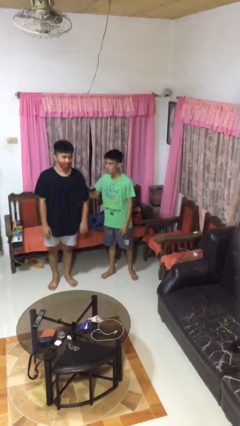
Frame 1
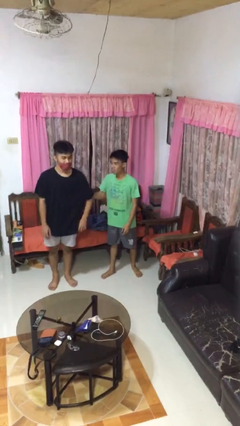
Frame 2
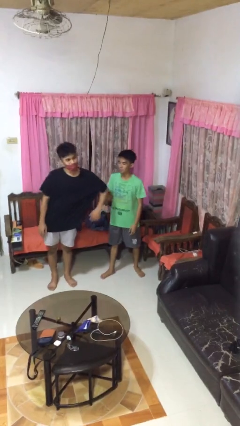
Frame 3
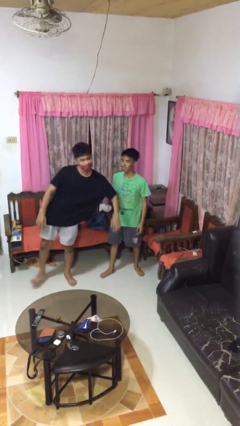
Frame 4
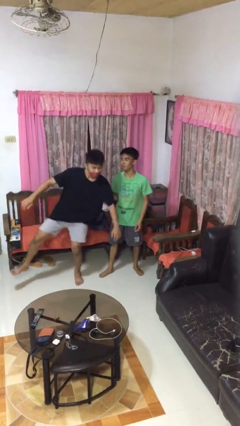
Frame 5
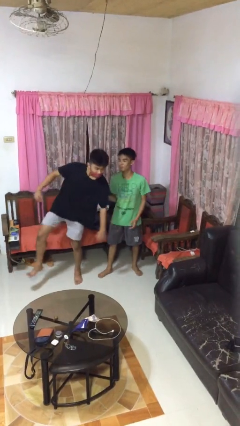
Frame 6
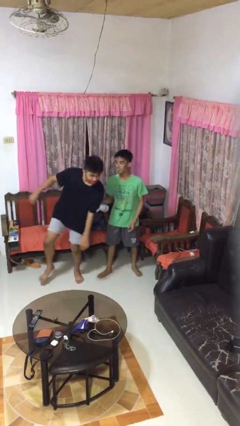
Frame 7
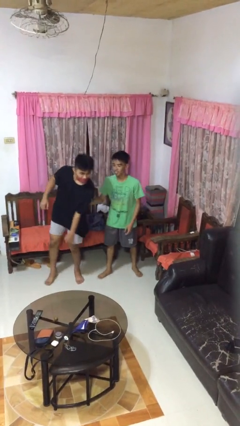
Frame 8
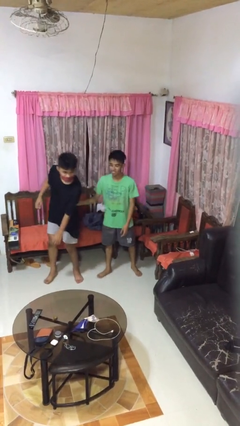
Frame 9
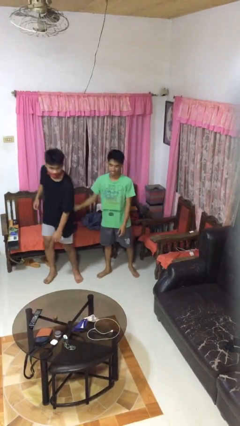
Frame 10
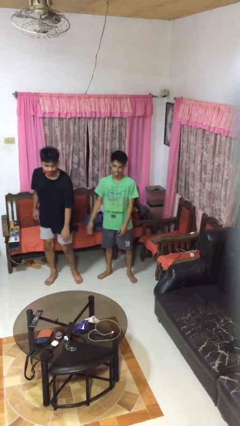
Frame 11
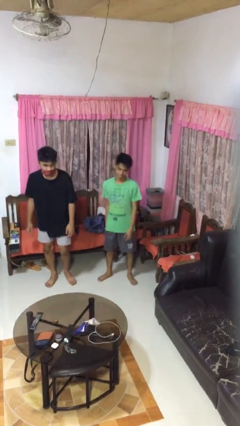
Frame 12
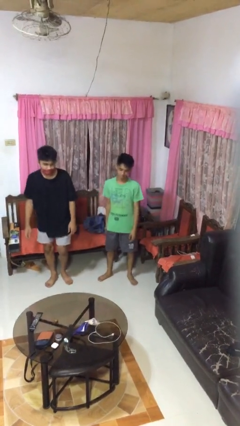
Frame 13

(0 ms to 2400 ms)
person grabs person by bicep

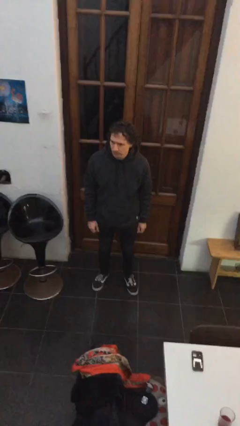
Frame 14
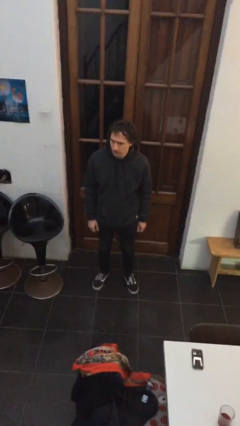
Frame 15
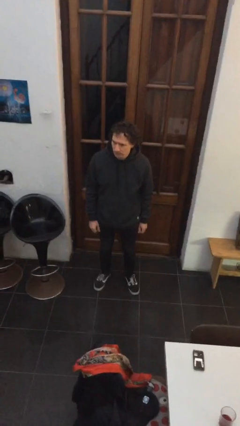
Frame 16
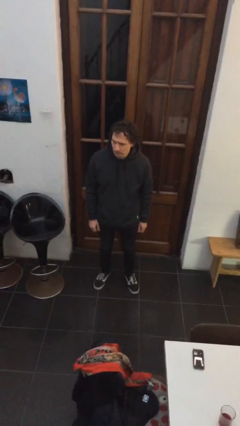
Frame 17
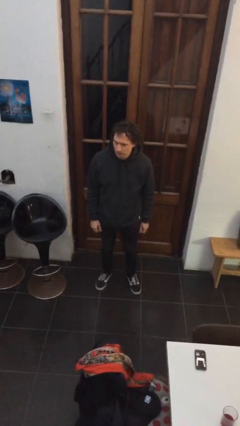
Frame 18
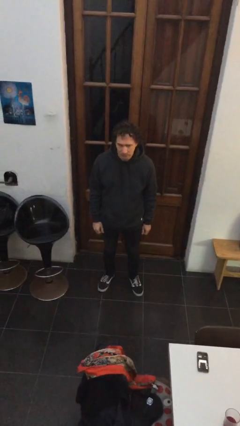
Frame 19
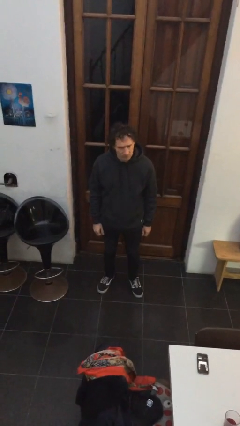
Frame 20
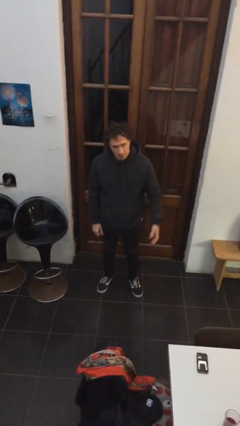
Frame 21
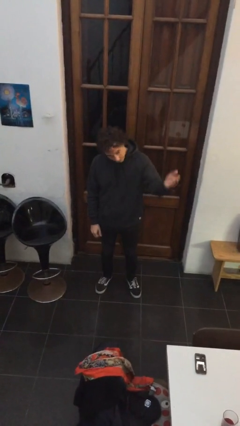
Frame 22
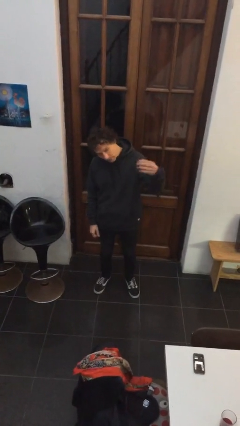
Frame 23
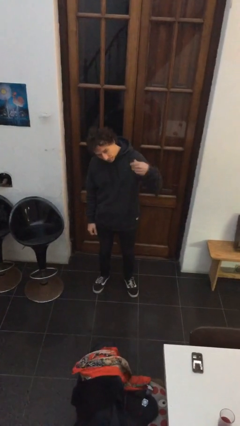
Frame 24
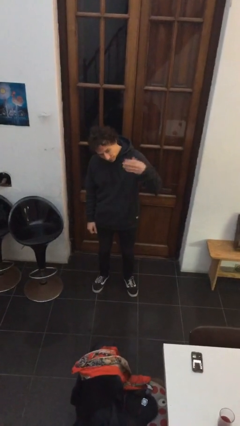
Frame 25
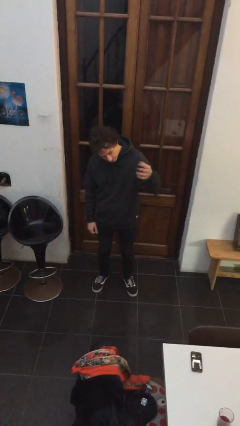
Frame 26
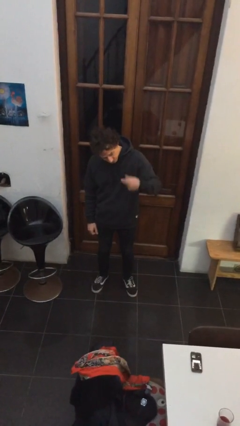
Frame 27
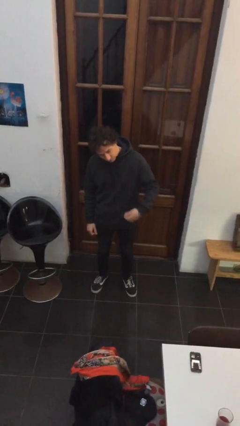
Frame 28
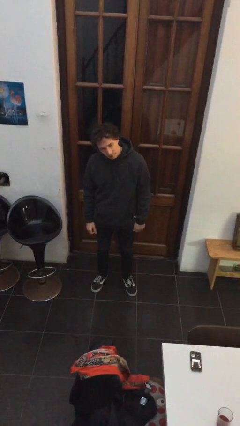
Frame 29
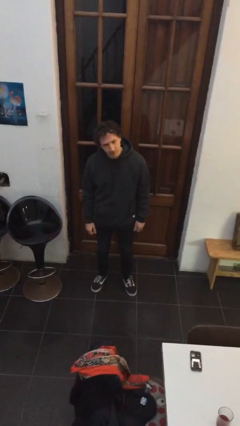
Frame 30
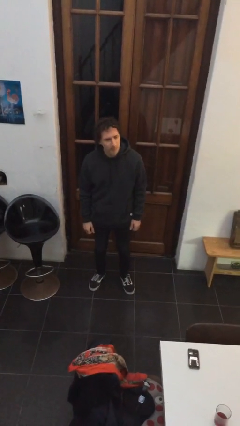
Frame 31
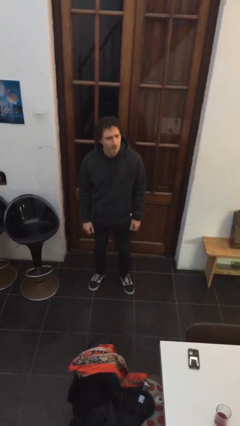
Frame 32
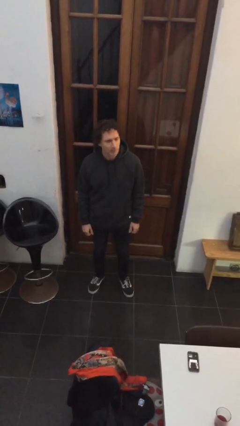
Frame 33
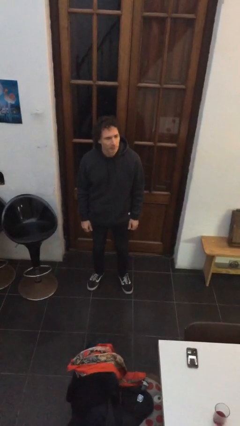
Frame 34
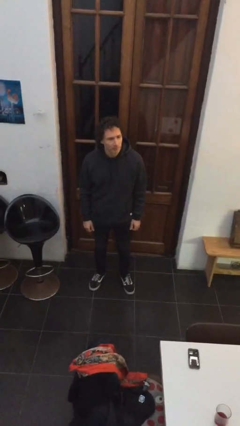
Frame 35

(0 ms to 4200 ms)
person gestures come here

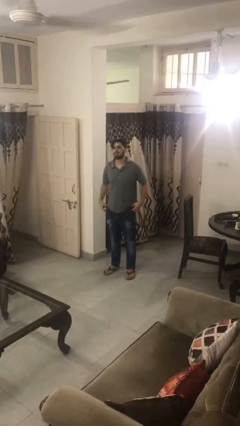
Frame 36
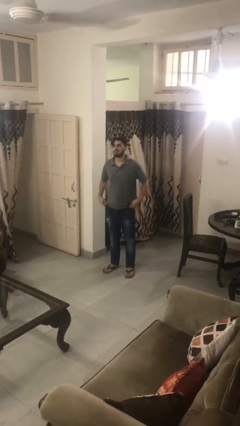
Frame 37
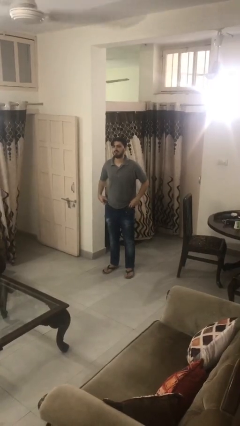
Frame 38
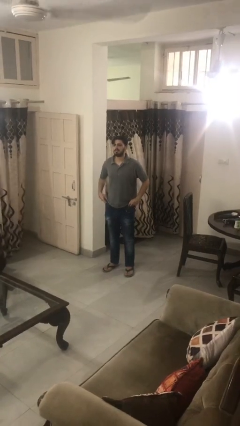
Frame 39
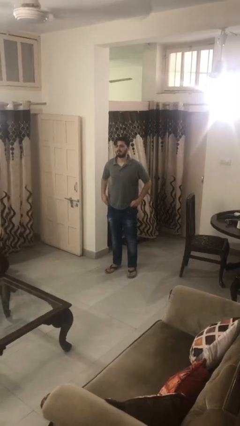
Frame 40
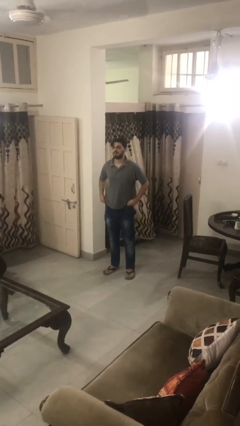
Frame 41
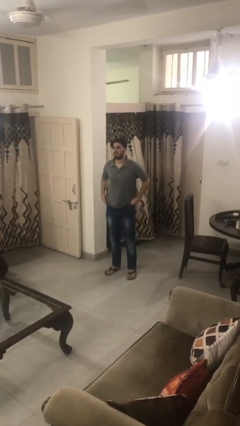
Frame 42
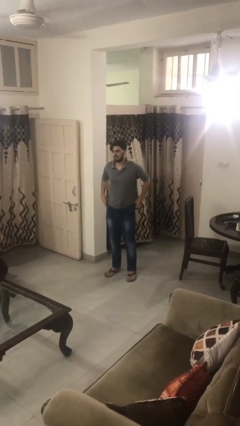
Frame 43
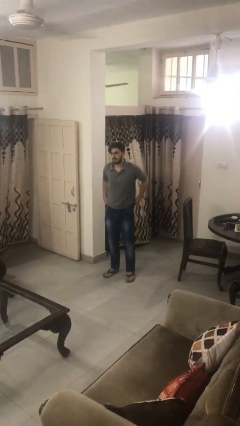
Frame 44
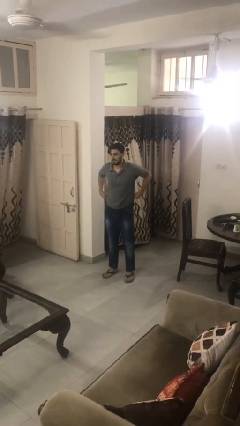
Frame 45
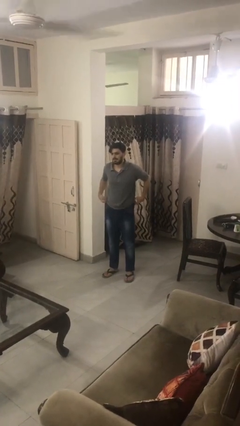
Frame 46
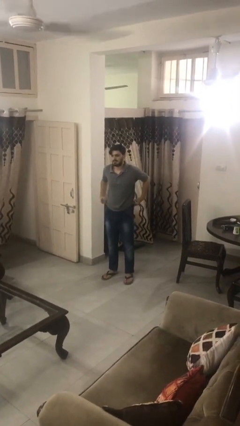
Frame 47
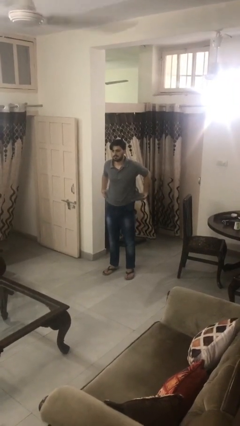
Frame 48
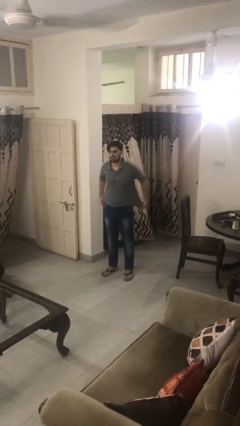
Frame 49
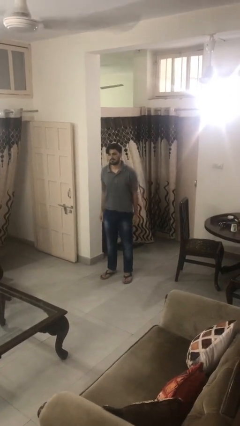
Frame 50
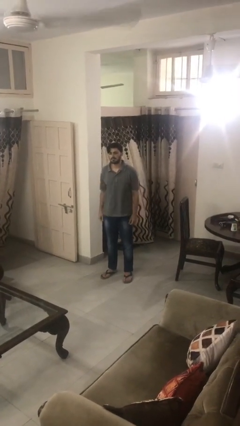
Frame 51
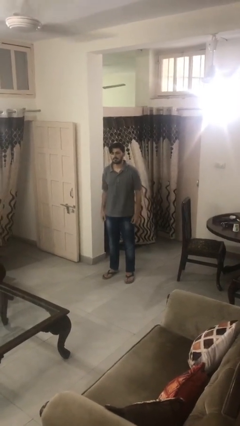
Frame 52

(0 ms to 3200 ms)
person hikes up pants

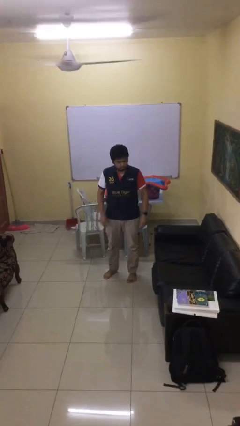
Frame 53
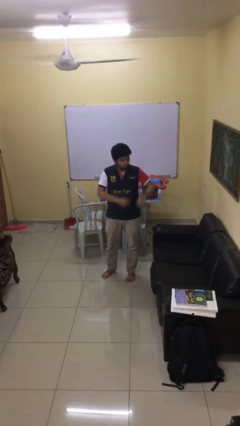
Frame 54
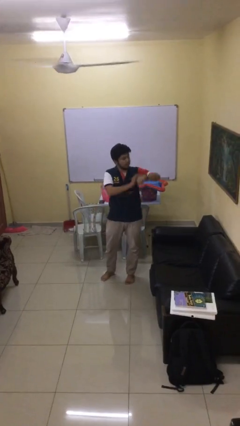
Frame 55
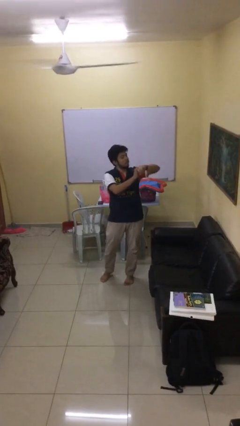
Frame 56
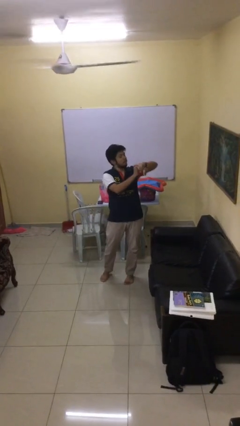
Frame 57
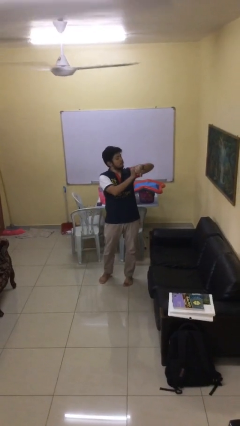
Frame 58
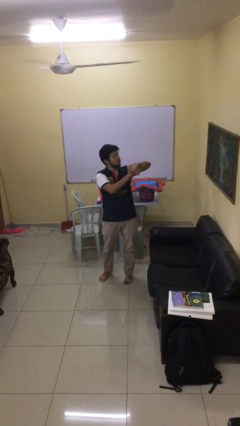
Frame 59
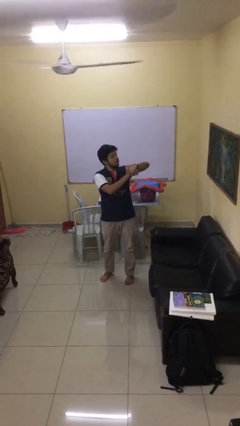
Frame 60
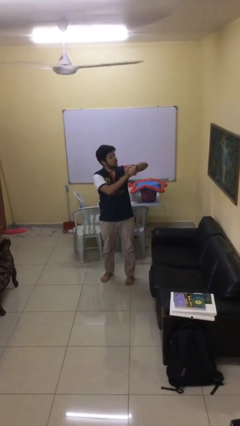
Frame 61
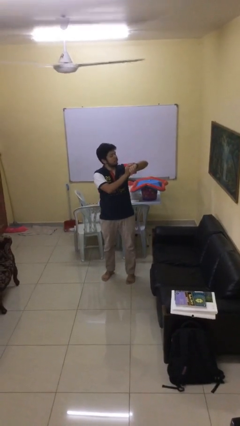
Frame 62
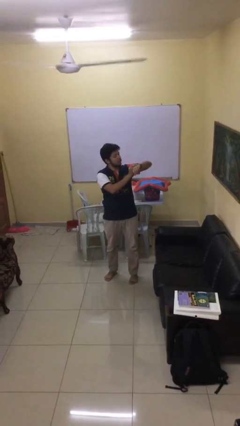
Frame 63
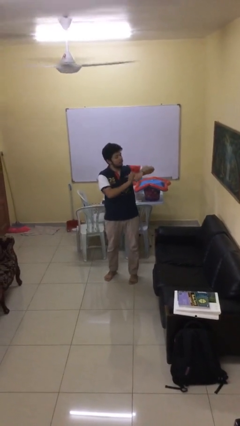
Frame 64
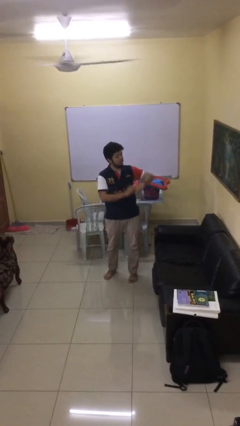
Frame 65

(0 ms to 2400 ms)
person looks at wristwatch

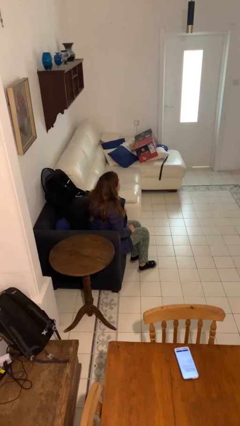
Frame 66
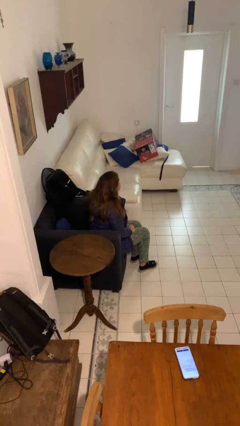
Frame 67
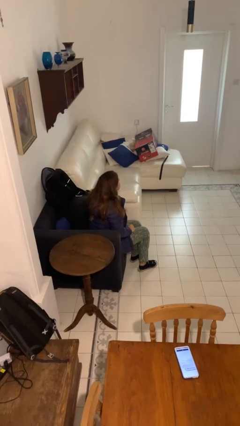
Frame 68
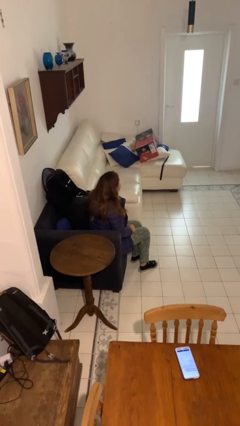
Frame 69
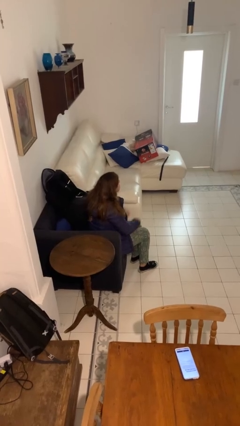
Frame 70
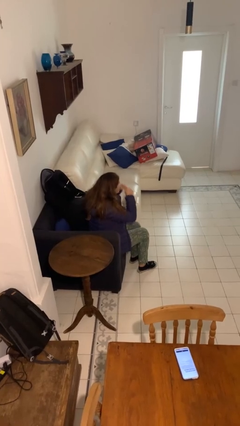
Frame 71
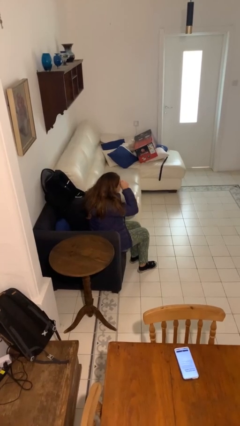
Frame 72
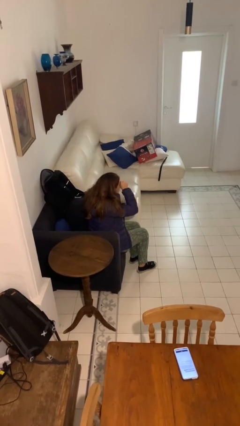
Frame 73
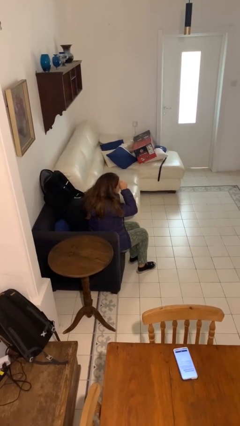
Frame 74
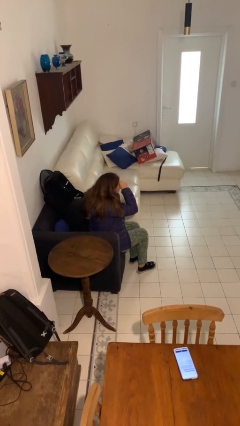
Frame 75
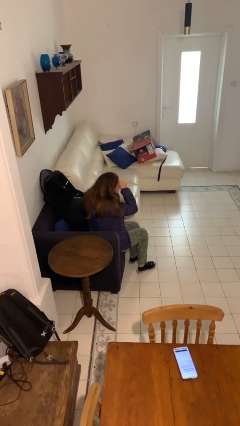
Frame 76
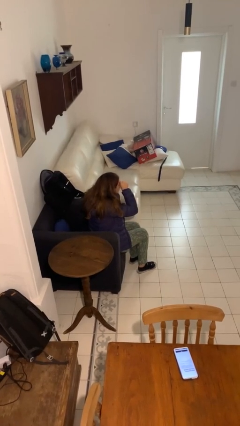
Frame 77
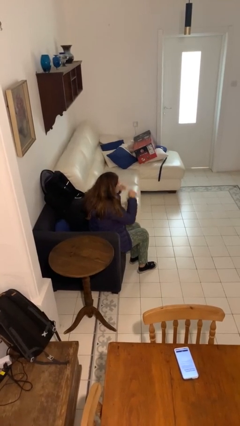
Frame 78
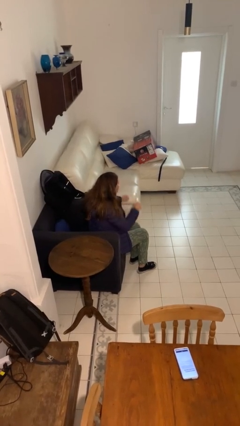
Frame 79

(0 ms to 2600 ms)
person rubs eyes

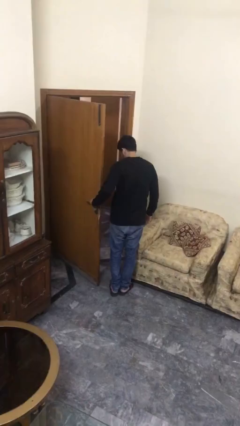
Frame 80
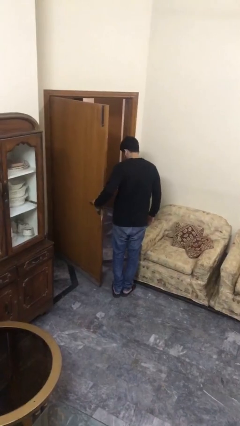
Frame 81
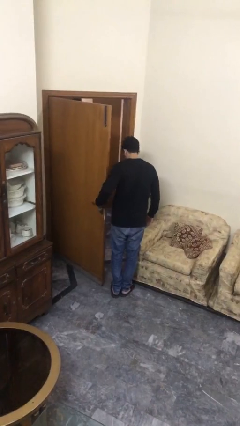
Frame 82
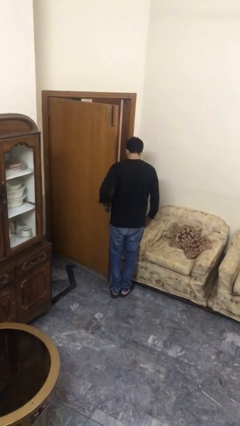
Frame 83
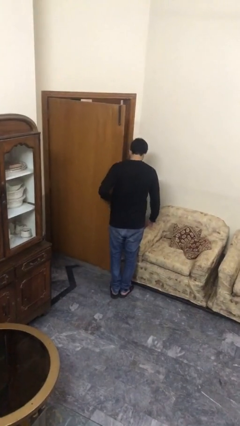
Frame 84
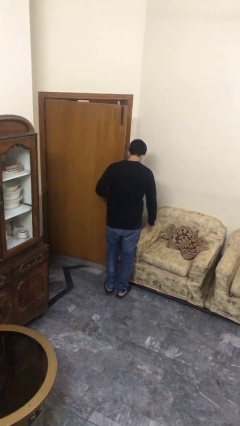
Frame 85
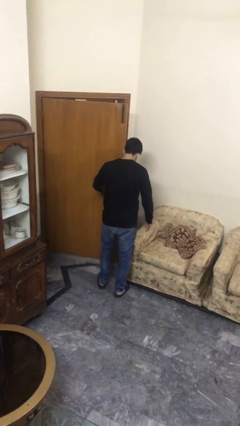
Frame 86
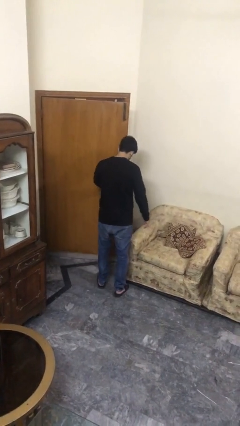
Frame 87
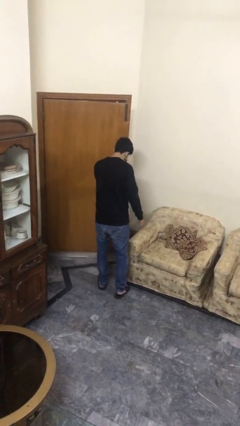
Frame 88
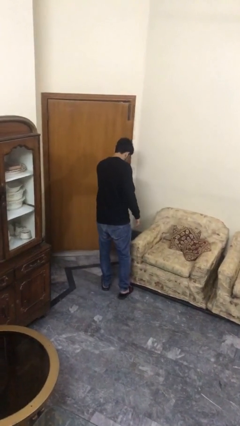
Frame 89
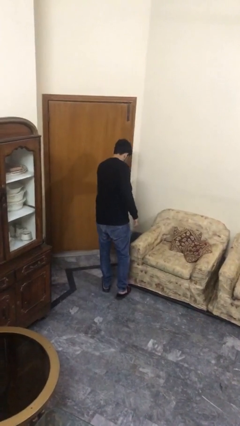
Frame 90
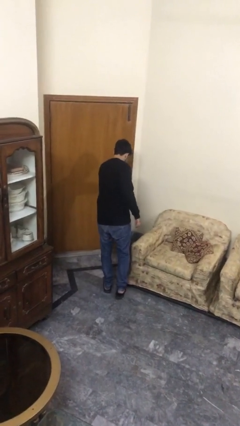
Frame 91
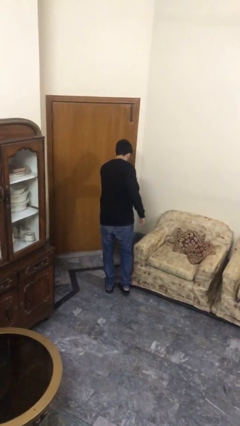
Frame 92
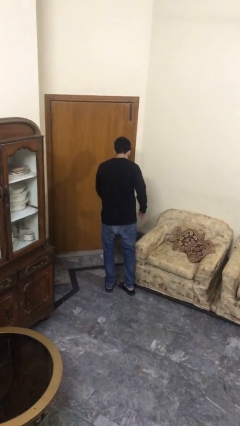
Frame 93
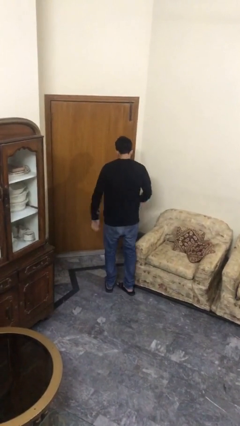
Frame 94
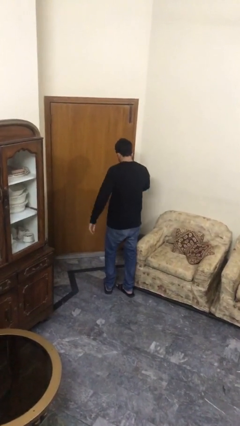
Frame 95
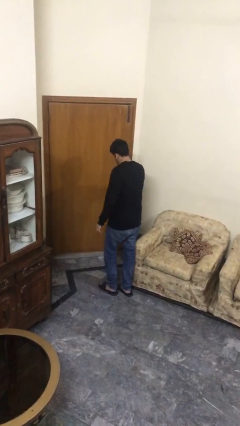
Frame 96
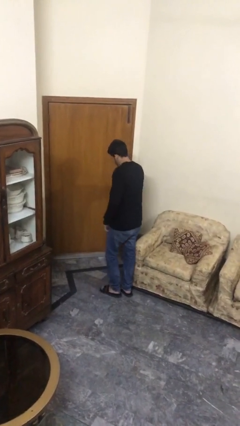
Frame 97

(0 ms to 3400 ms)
person closes facility door
